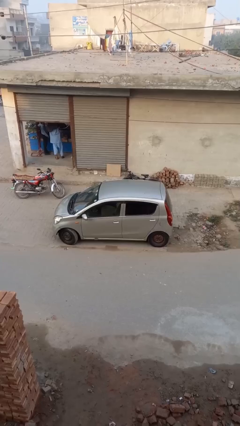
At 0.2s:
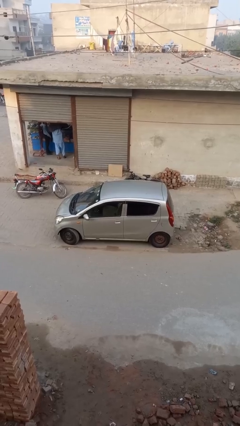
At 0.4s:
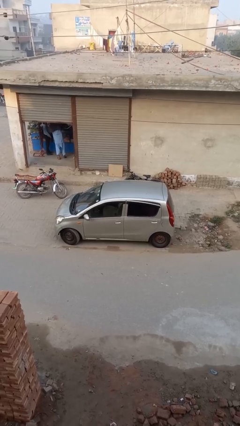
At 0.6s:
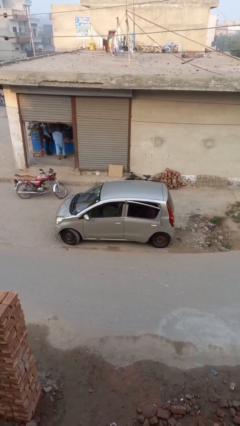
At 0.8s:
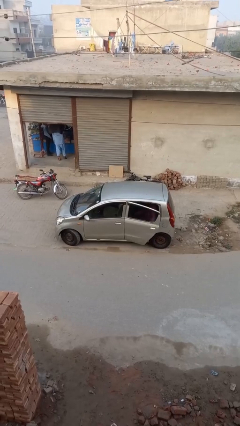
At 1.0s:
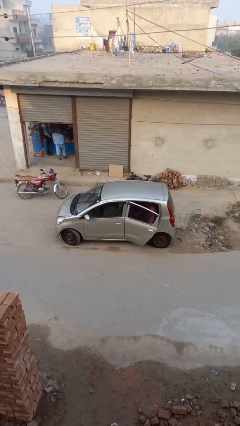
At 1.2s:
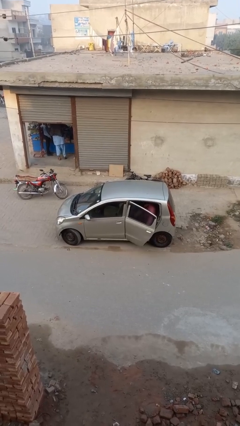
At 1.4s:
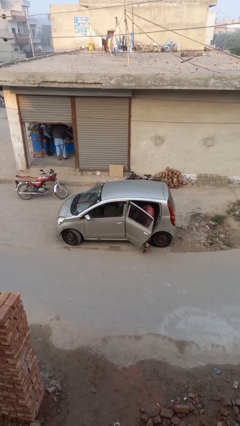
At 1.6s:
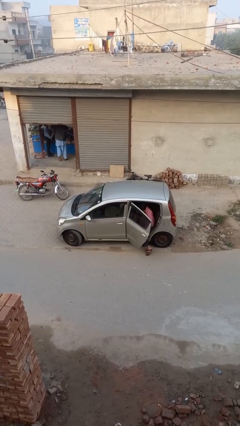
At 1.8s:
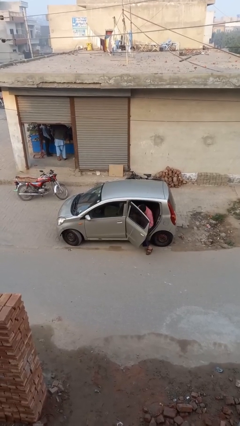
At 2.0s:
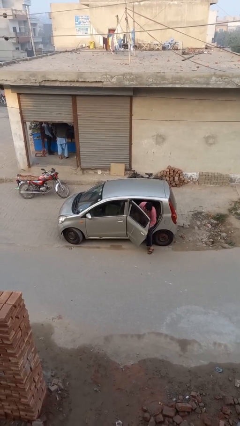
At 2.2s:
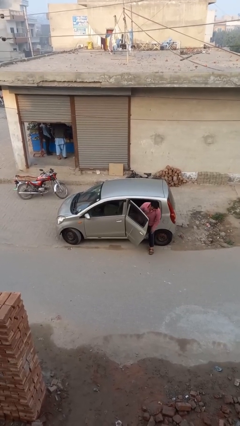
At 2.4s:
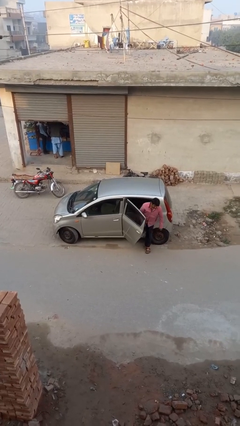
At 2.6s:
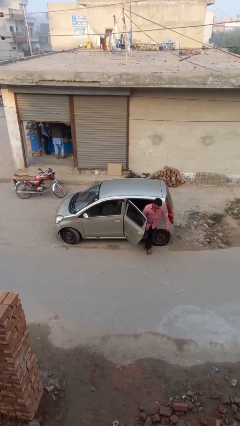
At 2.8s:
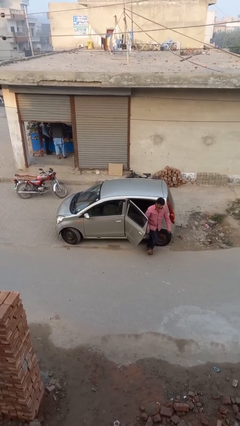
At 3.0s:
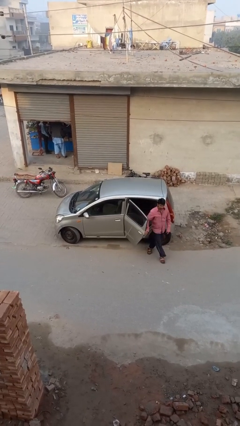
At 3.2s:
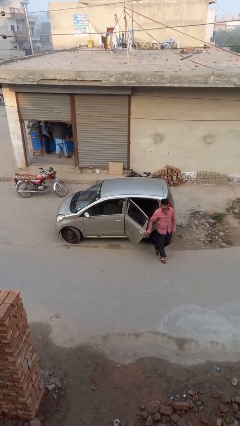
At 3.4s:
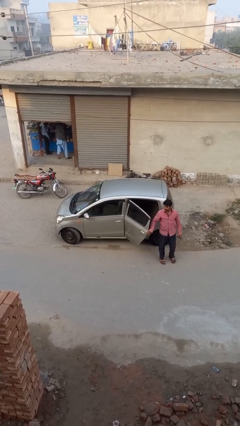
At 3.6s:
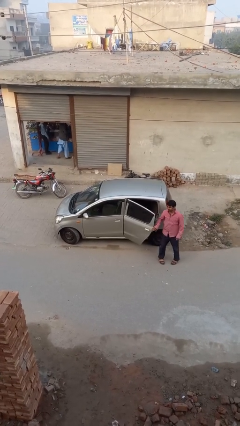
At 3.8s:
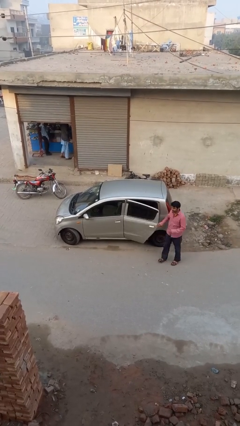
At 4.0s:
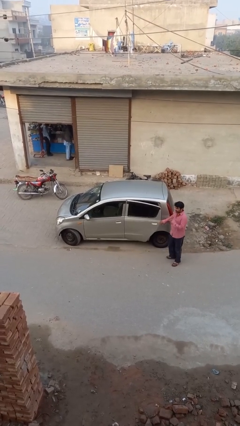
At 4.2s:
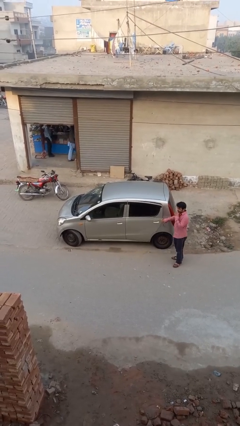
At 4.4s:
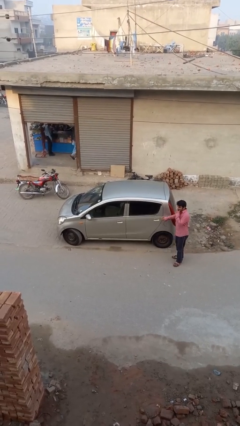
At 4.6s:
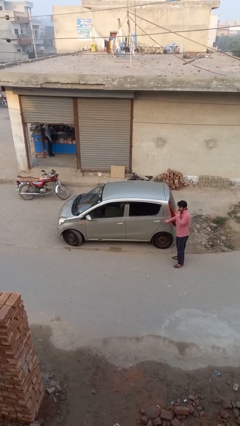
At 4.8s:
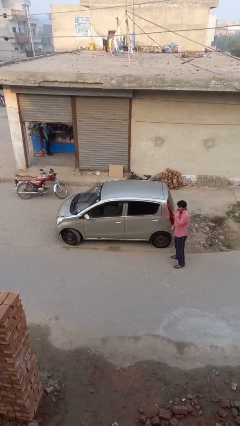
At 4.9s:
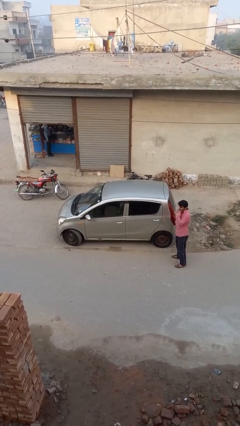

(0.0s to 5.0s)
car drops off person

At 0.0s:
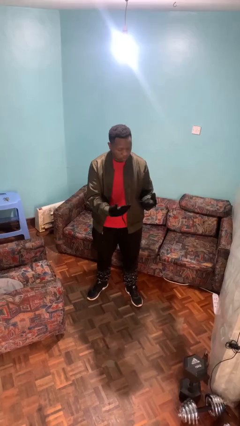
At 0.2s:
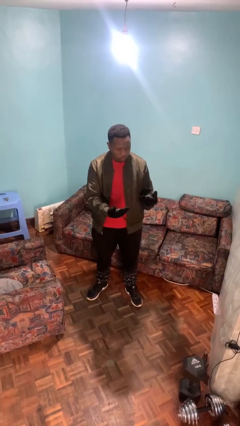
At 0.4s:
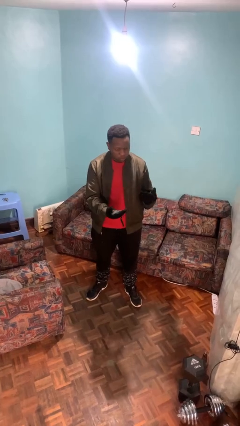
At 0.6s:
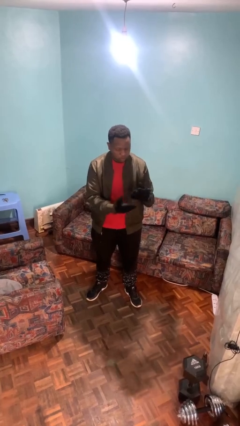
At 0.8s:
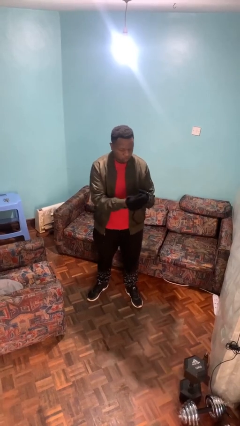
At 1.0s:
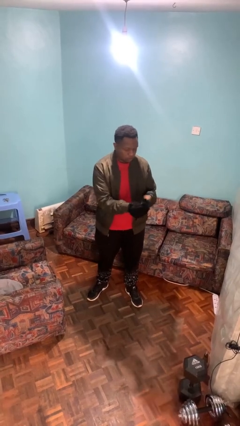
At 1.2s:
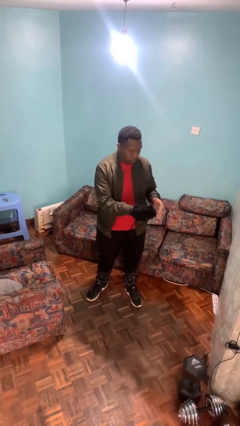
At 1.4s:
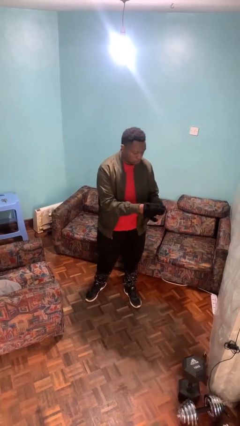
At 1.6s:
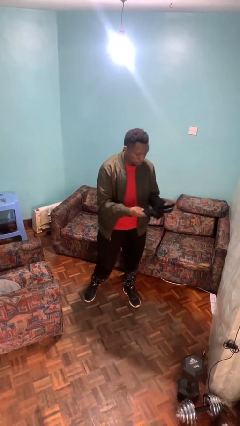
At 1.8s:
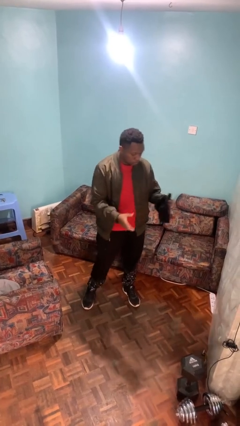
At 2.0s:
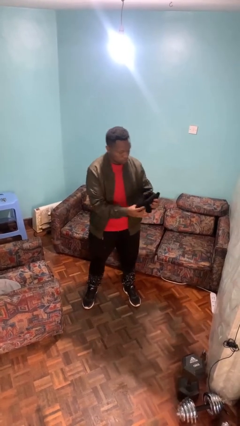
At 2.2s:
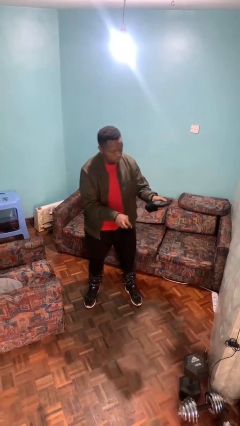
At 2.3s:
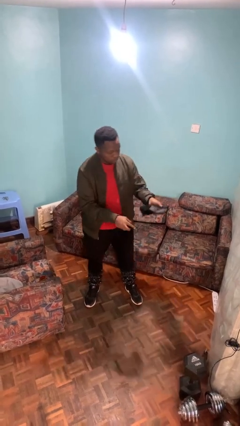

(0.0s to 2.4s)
person takes off gloves

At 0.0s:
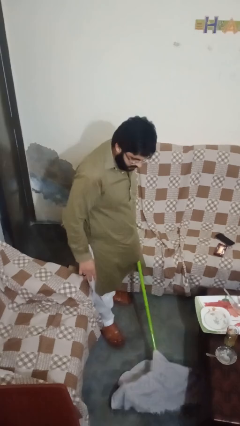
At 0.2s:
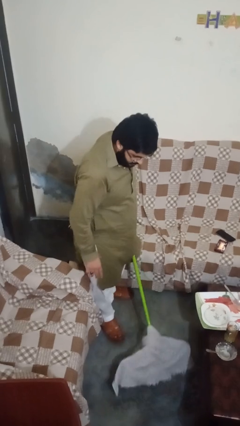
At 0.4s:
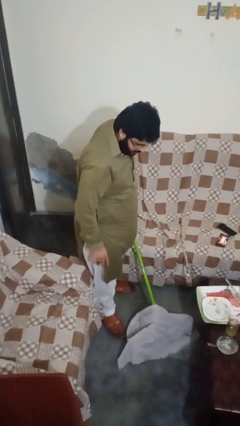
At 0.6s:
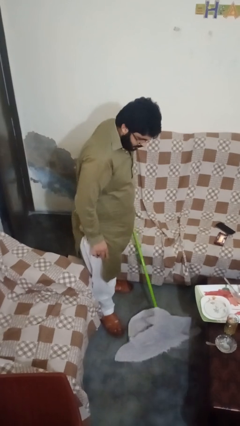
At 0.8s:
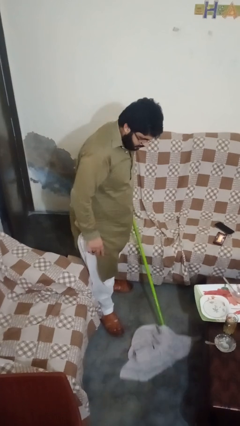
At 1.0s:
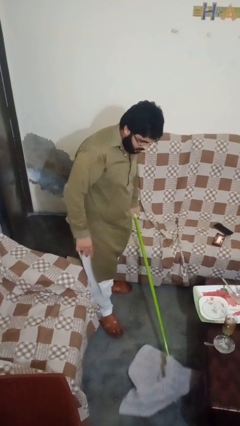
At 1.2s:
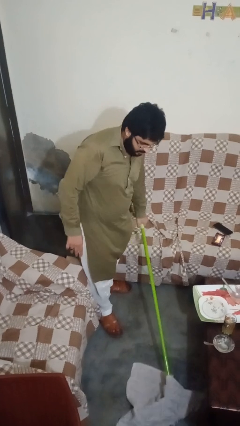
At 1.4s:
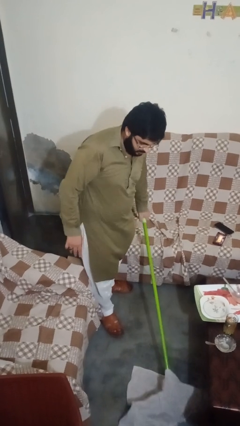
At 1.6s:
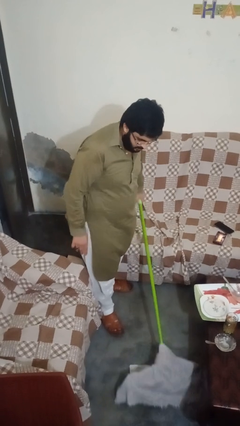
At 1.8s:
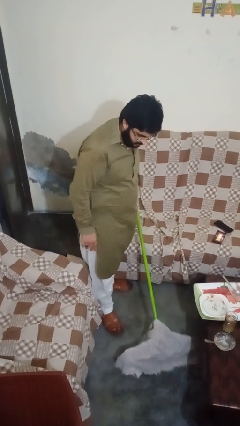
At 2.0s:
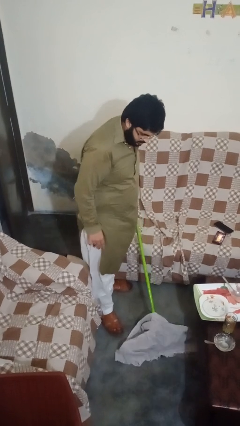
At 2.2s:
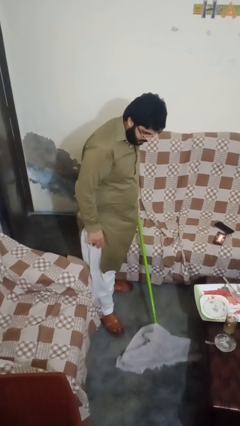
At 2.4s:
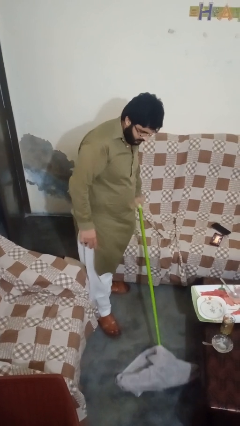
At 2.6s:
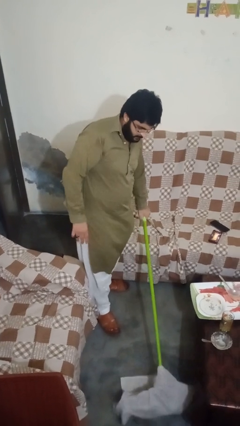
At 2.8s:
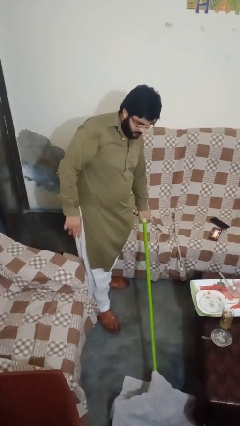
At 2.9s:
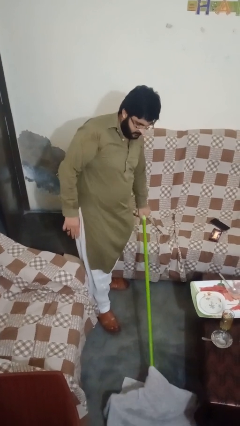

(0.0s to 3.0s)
person mops

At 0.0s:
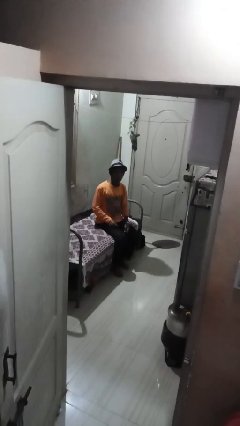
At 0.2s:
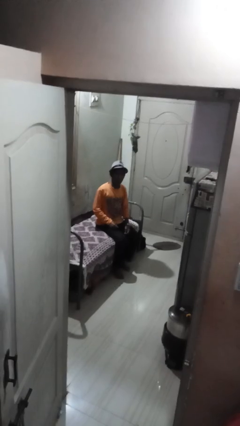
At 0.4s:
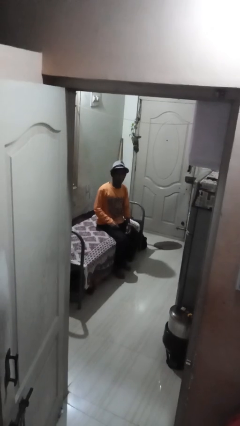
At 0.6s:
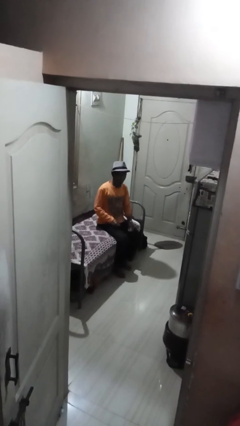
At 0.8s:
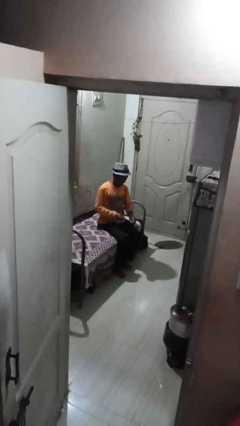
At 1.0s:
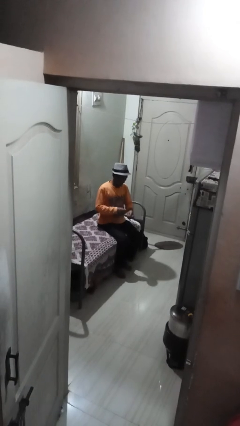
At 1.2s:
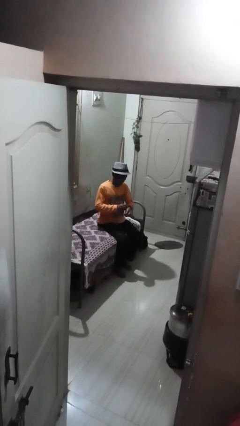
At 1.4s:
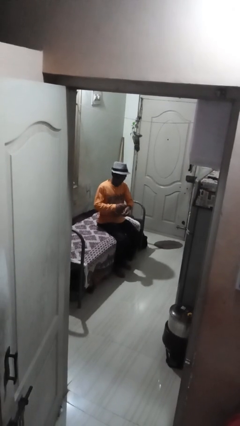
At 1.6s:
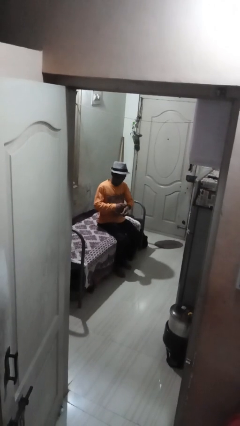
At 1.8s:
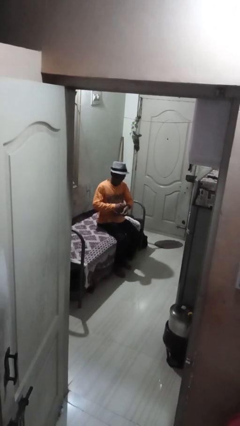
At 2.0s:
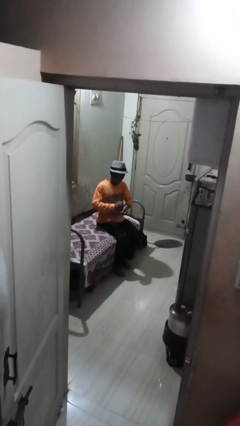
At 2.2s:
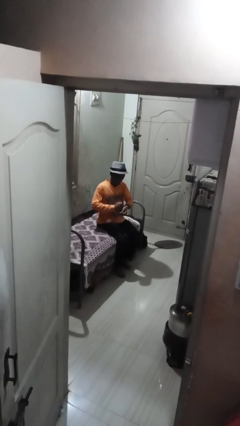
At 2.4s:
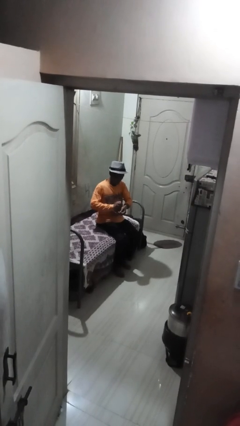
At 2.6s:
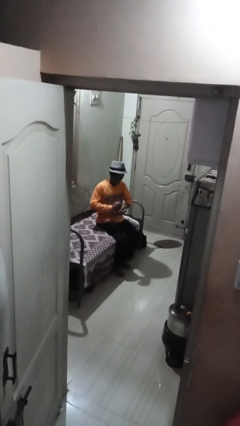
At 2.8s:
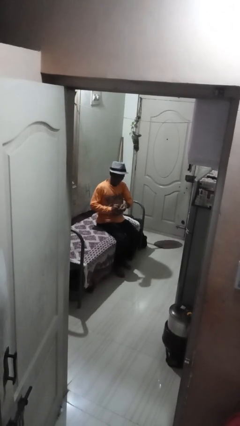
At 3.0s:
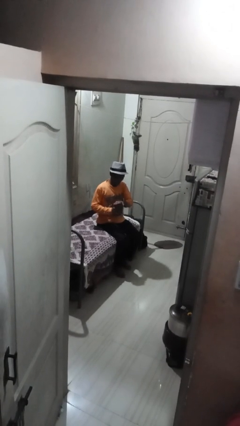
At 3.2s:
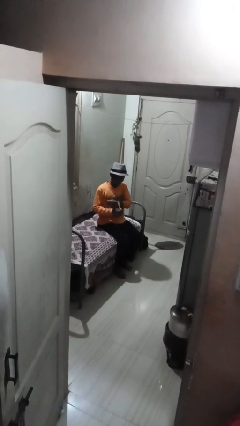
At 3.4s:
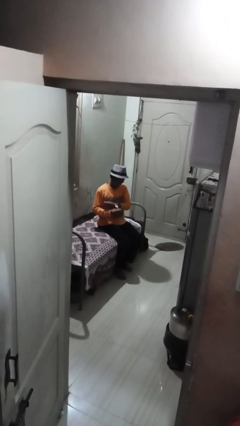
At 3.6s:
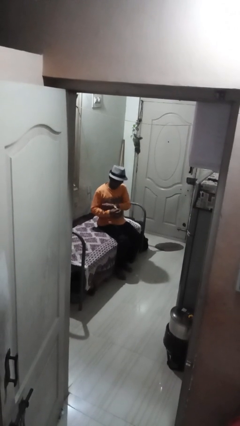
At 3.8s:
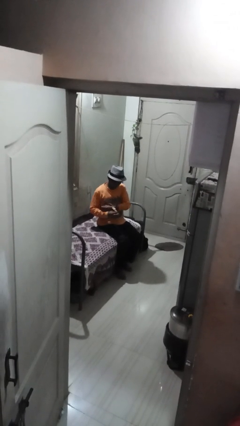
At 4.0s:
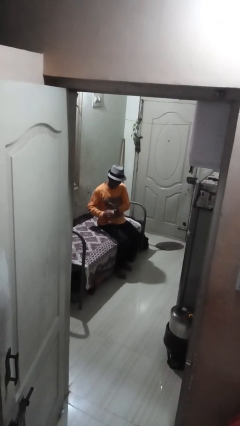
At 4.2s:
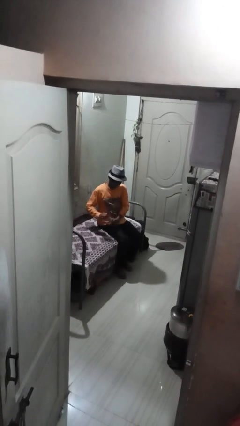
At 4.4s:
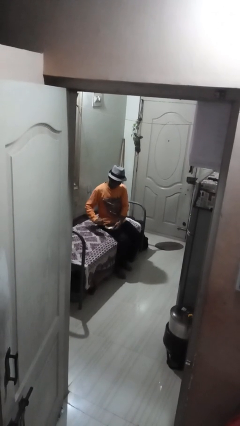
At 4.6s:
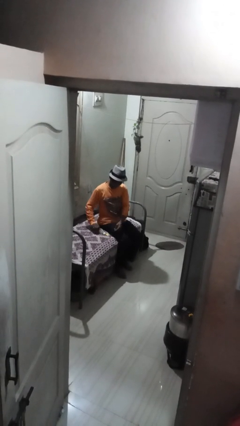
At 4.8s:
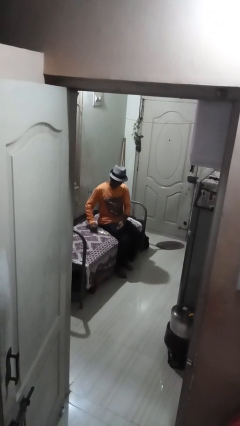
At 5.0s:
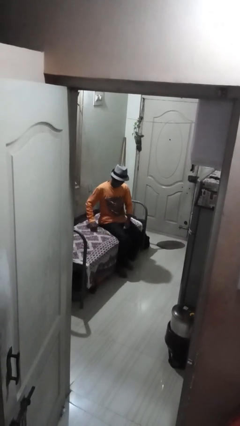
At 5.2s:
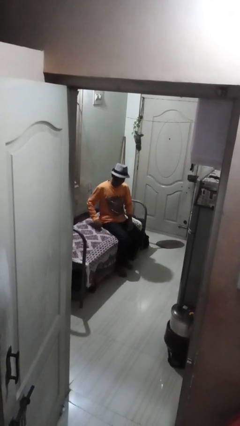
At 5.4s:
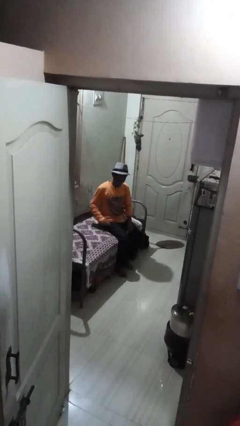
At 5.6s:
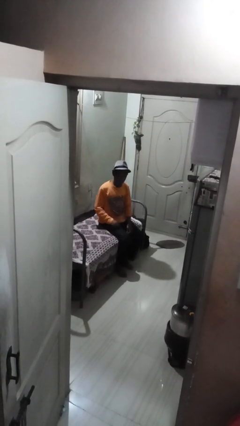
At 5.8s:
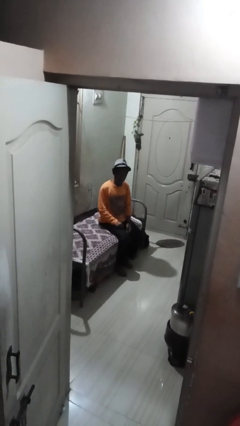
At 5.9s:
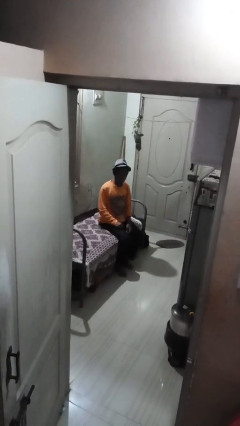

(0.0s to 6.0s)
person takes off wristwatch

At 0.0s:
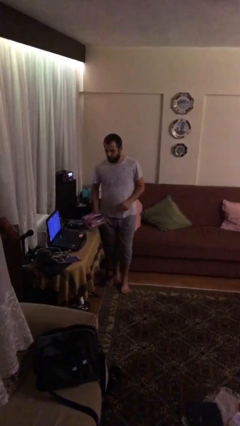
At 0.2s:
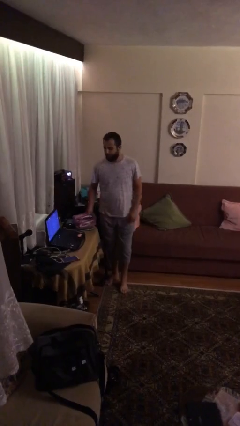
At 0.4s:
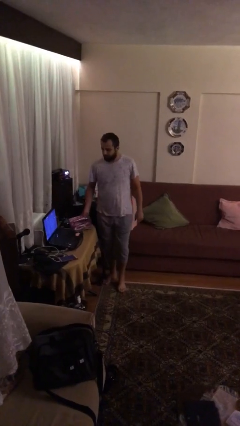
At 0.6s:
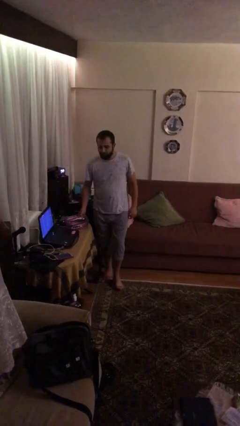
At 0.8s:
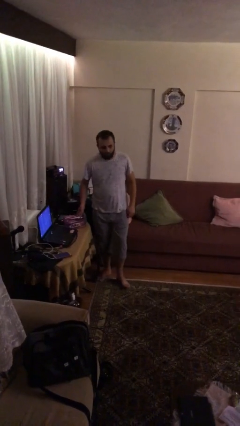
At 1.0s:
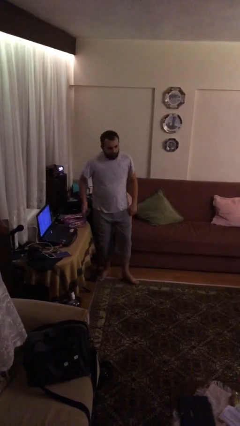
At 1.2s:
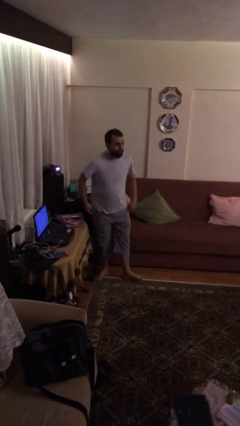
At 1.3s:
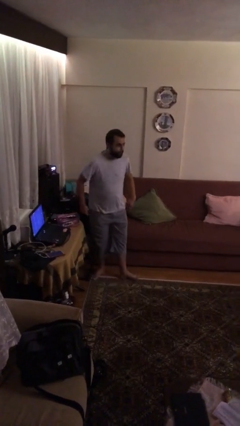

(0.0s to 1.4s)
person puts down object on table

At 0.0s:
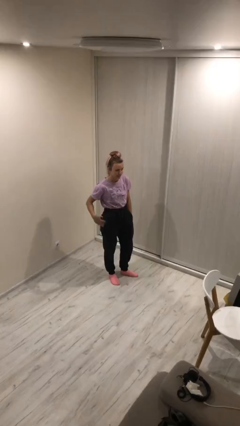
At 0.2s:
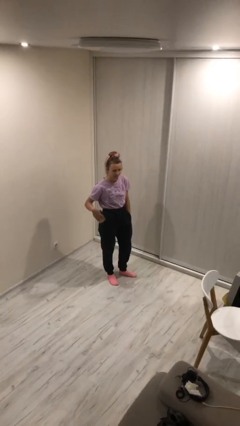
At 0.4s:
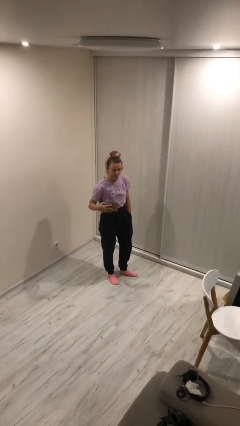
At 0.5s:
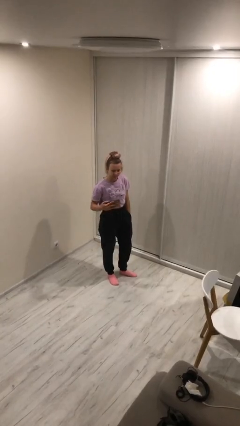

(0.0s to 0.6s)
person takes phone from pocket
